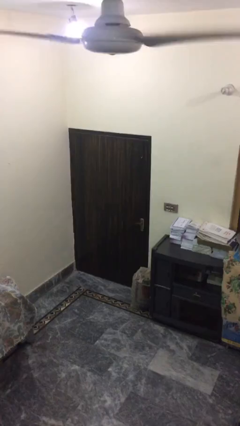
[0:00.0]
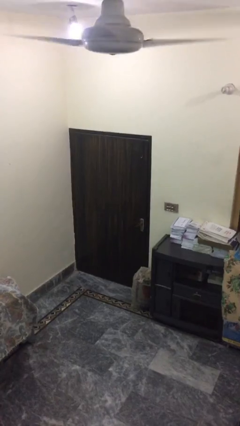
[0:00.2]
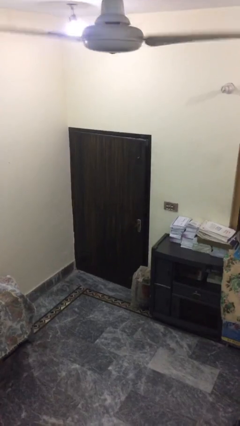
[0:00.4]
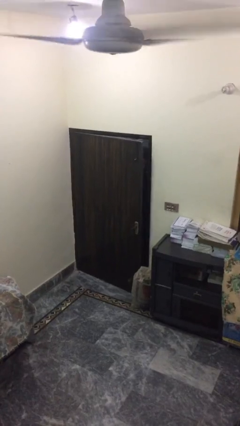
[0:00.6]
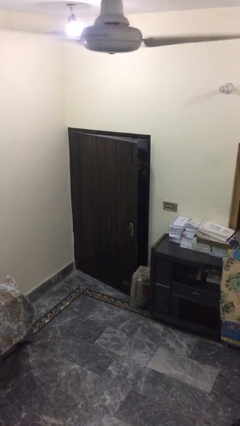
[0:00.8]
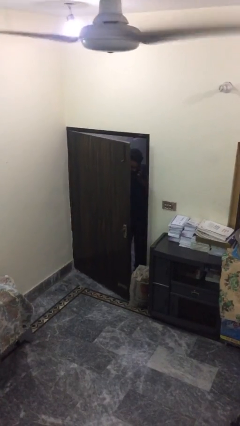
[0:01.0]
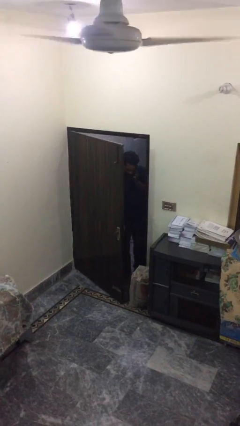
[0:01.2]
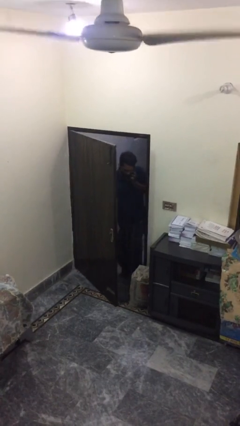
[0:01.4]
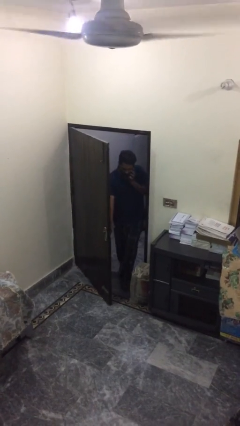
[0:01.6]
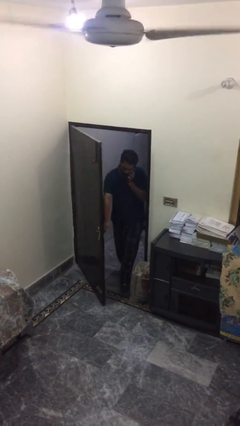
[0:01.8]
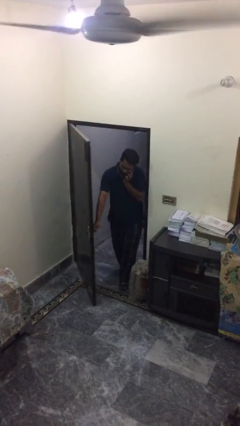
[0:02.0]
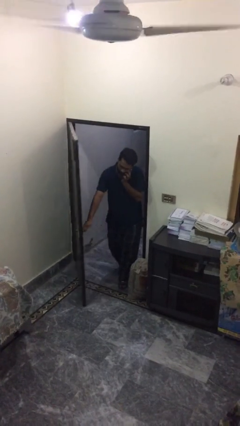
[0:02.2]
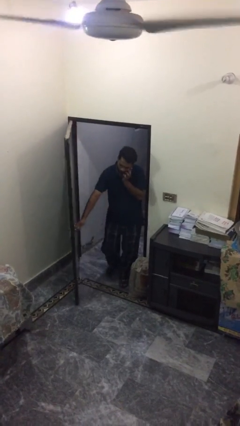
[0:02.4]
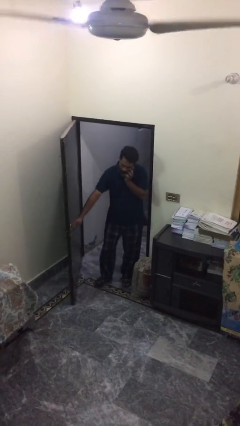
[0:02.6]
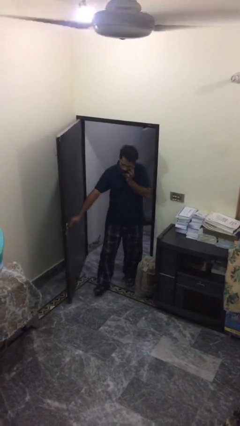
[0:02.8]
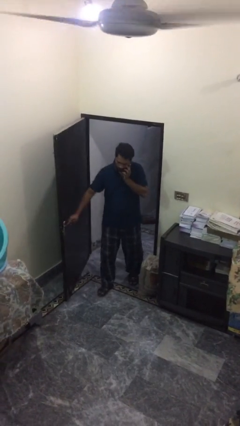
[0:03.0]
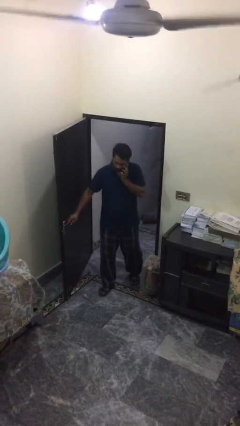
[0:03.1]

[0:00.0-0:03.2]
person opens facility door

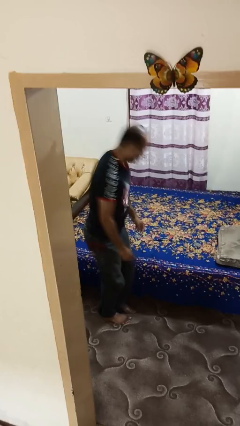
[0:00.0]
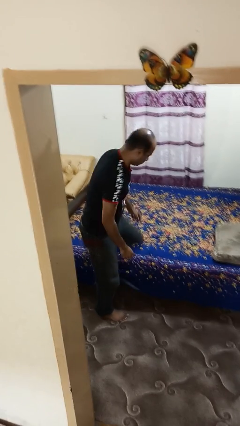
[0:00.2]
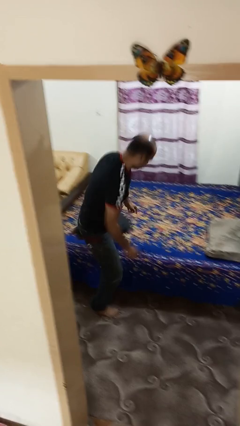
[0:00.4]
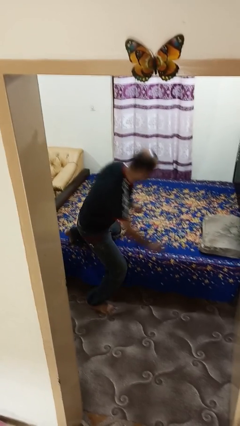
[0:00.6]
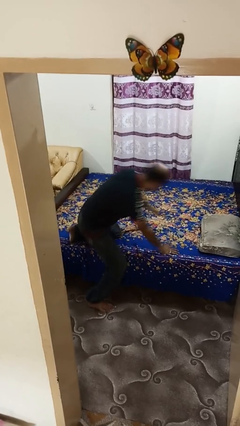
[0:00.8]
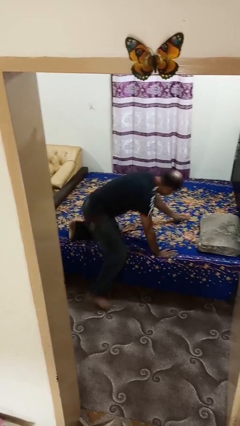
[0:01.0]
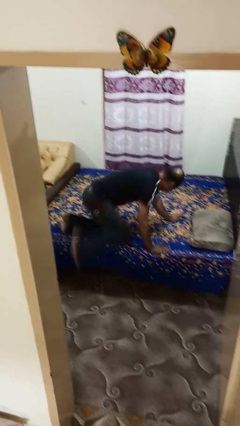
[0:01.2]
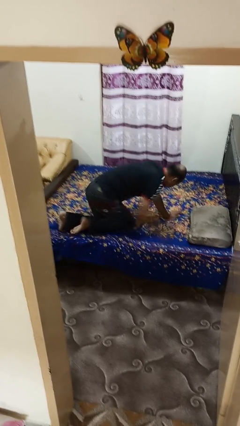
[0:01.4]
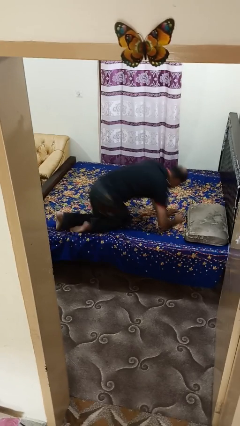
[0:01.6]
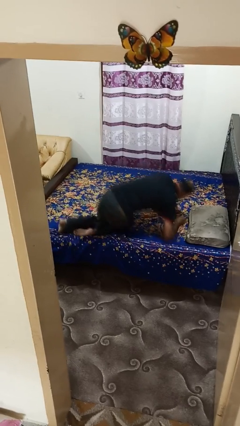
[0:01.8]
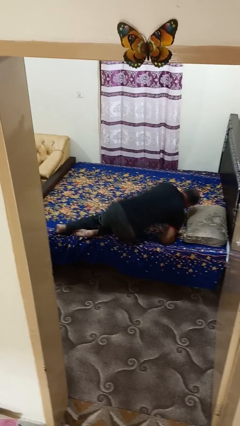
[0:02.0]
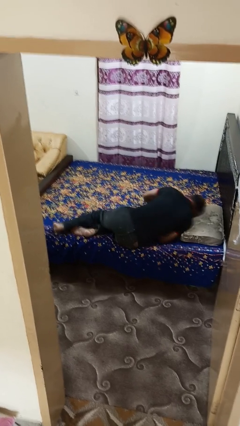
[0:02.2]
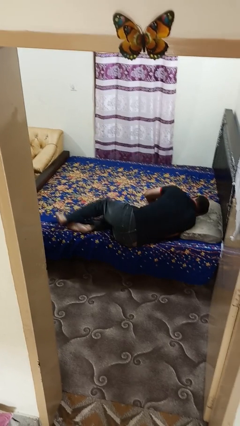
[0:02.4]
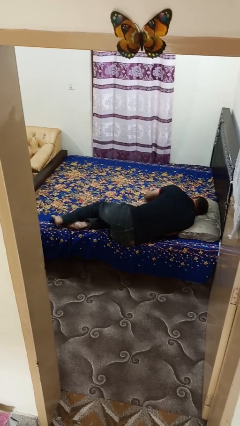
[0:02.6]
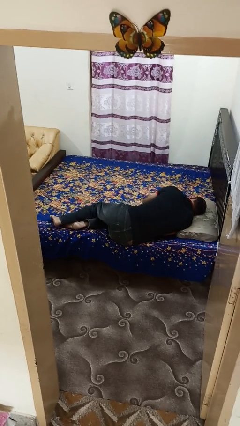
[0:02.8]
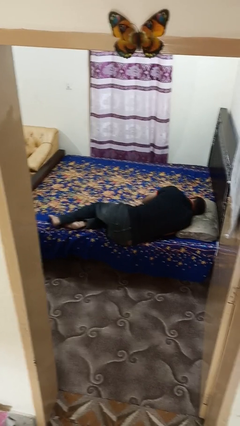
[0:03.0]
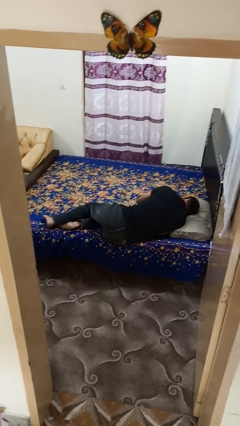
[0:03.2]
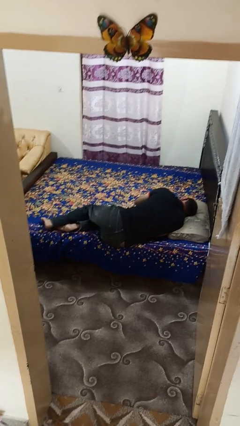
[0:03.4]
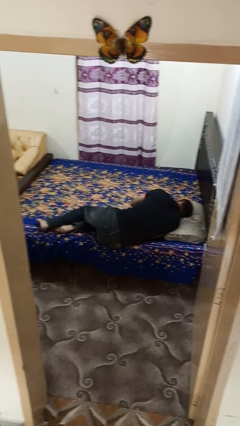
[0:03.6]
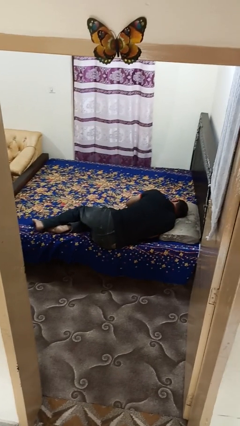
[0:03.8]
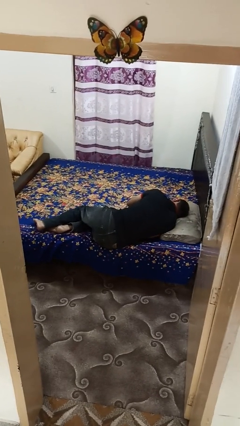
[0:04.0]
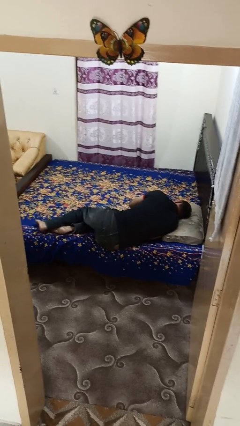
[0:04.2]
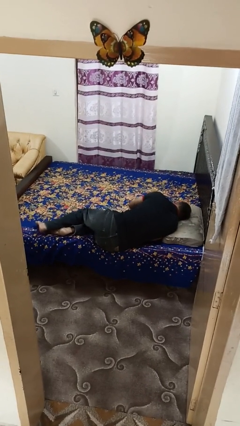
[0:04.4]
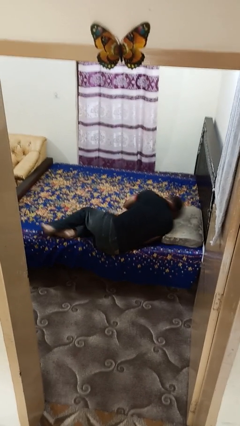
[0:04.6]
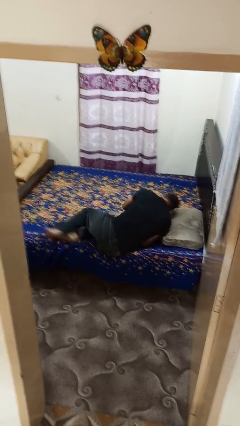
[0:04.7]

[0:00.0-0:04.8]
person lies down on bed

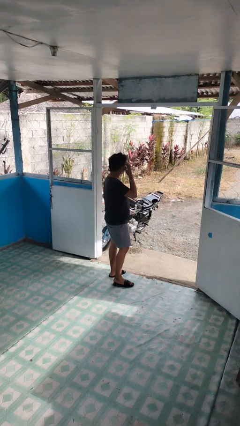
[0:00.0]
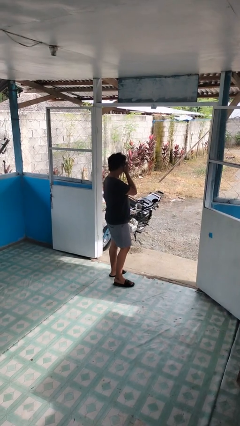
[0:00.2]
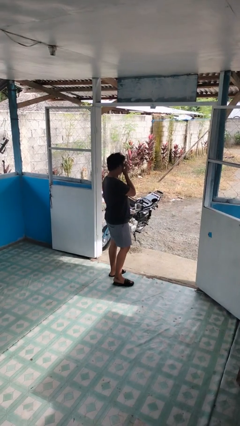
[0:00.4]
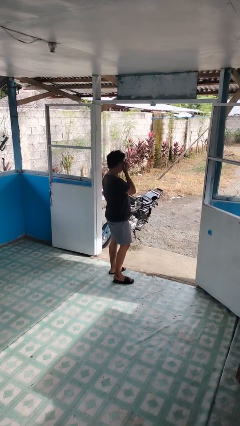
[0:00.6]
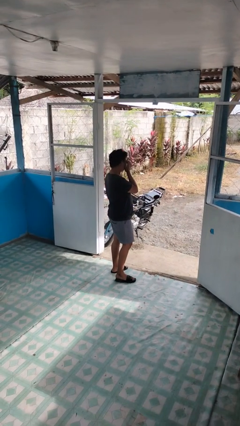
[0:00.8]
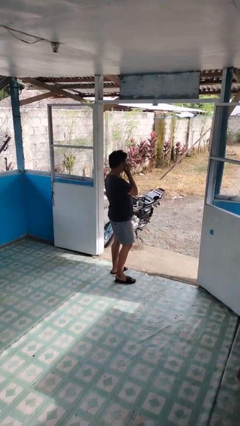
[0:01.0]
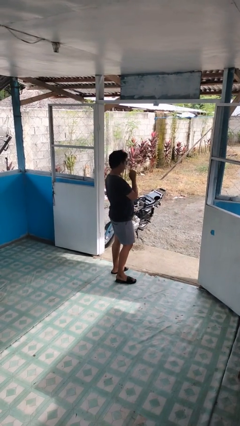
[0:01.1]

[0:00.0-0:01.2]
person scratches face

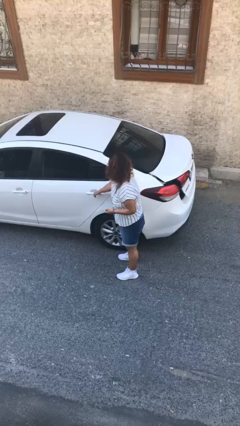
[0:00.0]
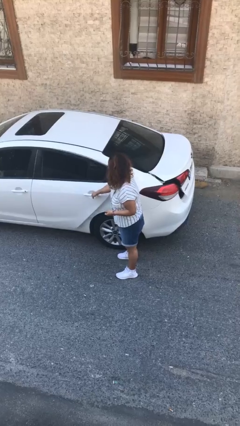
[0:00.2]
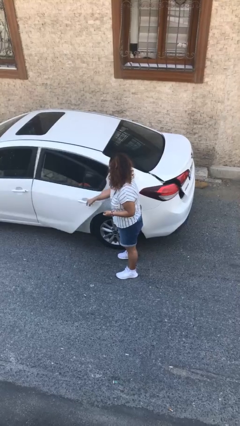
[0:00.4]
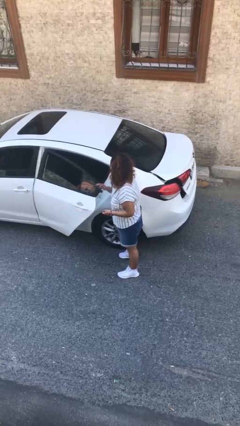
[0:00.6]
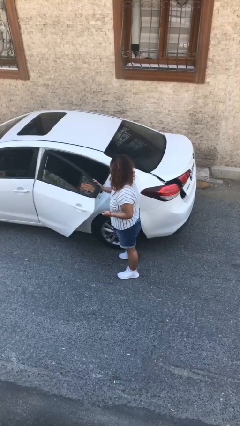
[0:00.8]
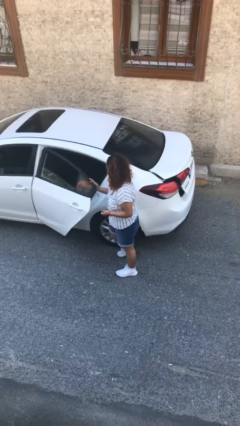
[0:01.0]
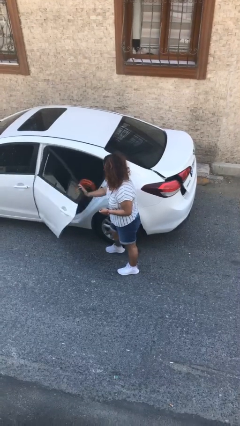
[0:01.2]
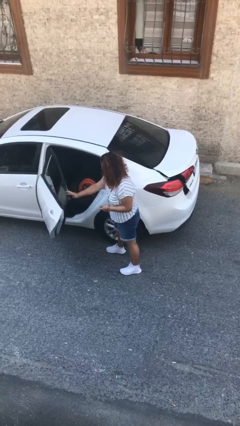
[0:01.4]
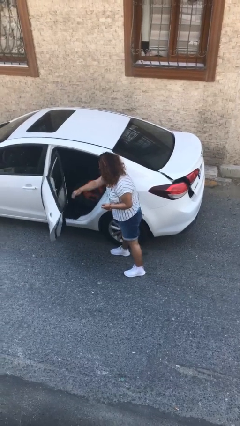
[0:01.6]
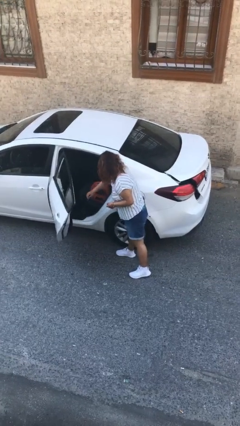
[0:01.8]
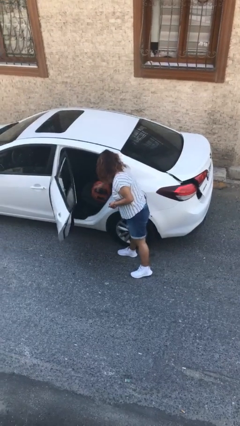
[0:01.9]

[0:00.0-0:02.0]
person opens car door

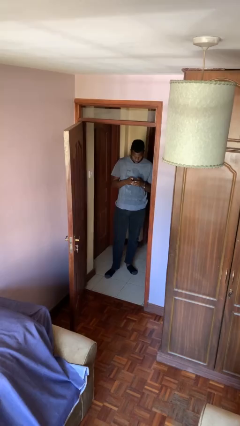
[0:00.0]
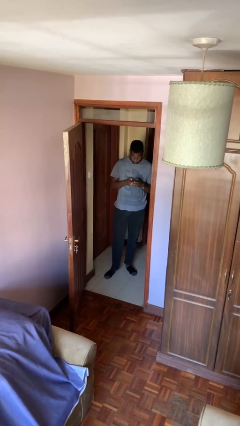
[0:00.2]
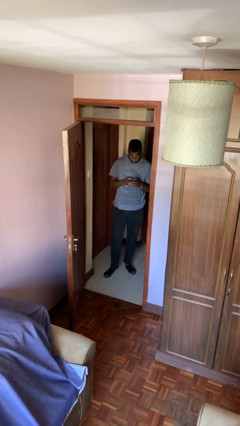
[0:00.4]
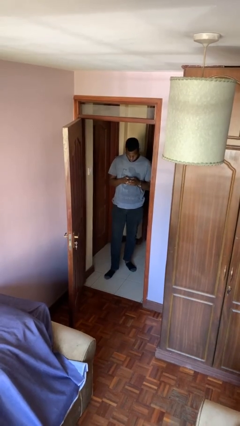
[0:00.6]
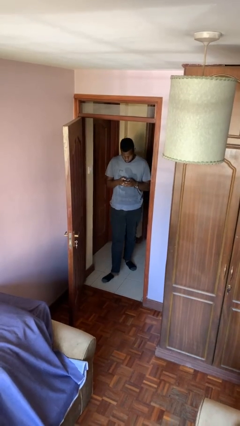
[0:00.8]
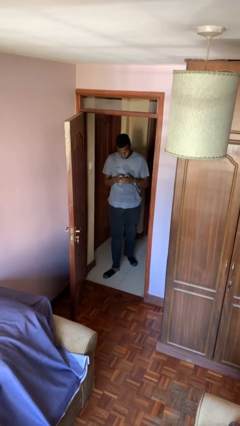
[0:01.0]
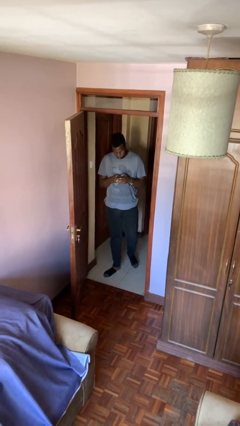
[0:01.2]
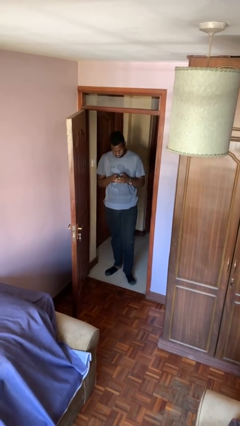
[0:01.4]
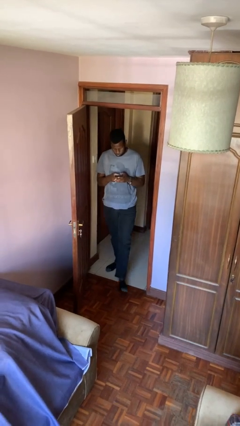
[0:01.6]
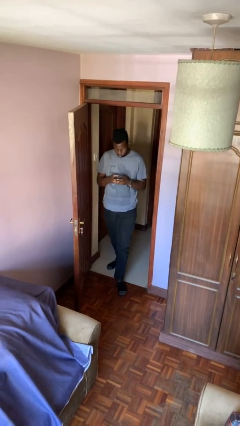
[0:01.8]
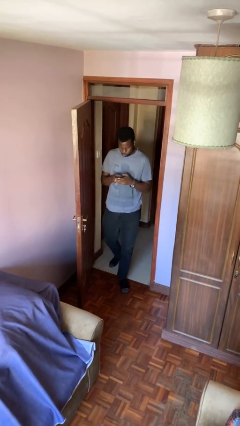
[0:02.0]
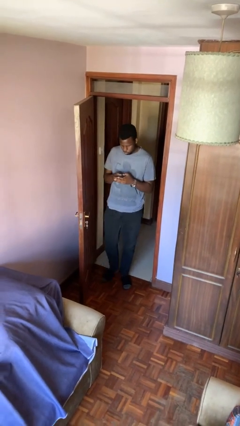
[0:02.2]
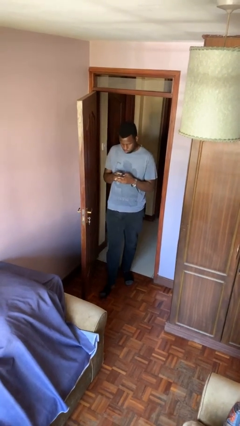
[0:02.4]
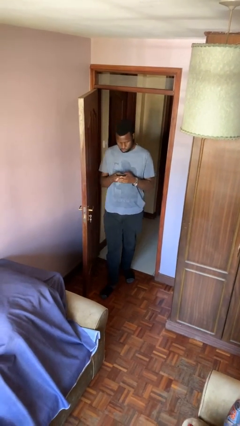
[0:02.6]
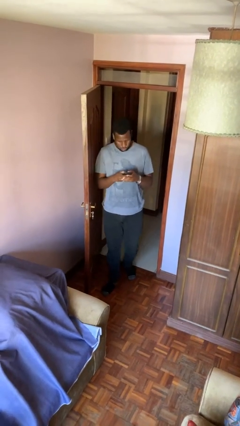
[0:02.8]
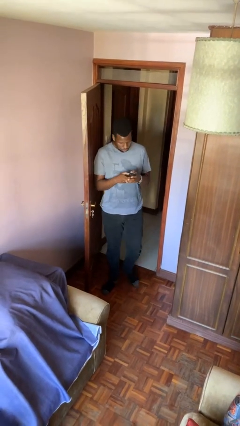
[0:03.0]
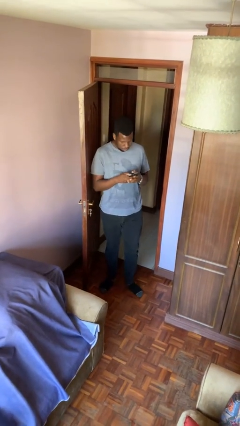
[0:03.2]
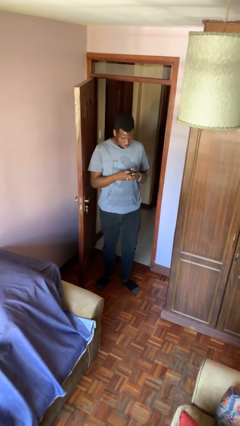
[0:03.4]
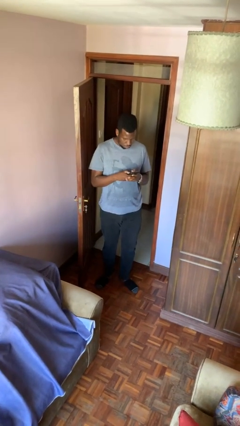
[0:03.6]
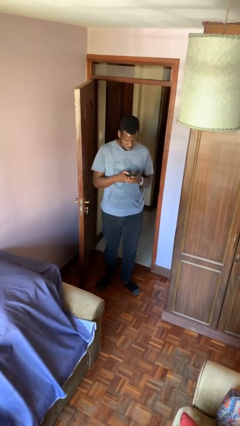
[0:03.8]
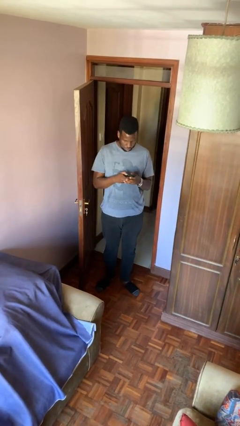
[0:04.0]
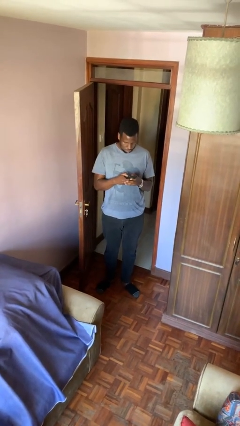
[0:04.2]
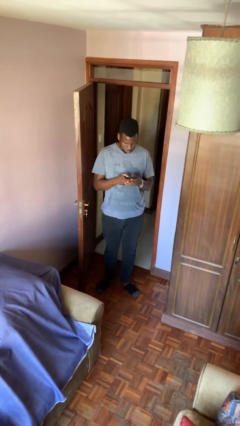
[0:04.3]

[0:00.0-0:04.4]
person enters scene through structure

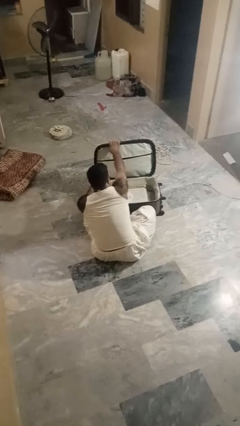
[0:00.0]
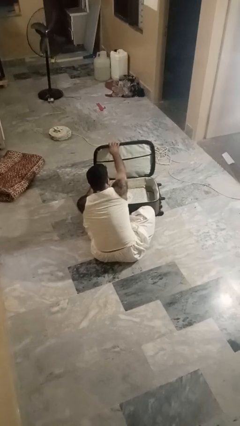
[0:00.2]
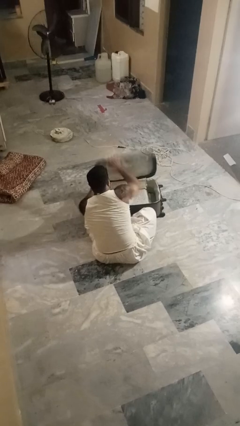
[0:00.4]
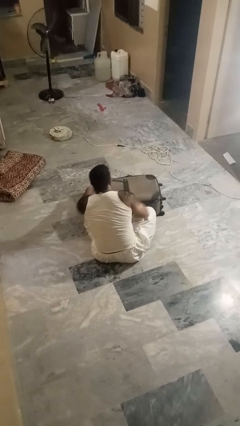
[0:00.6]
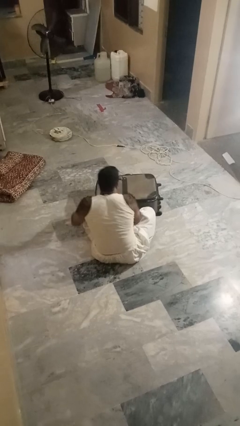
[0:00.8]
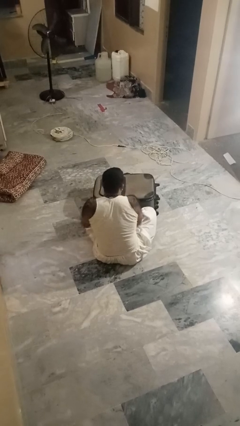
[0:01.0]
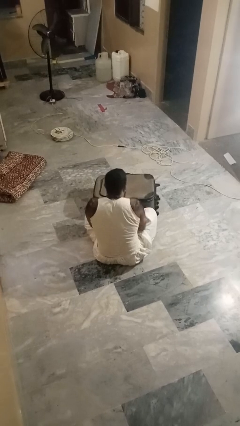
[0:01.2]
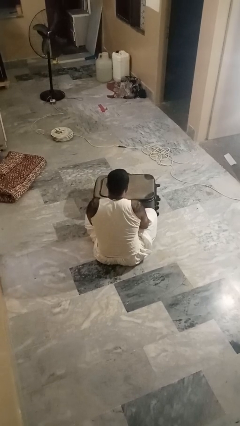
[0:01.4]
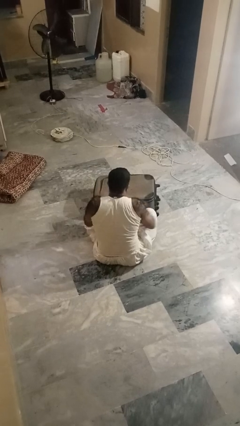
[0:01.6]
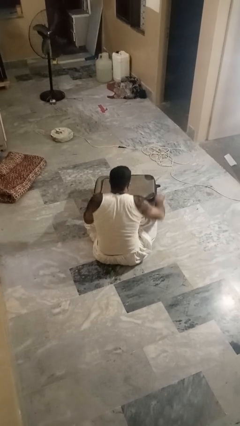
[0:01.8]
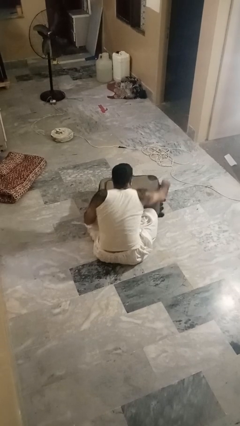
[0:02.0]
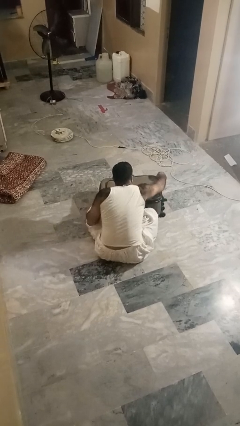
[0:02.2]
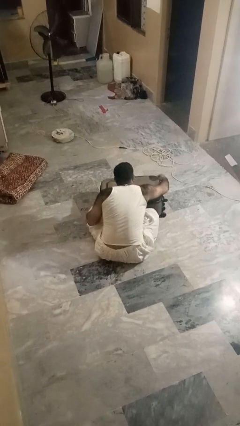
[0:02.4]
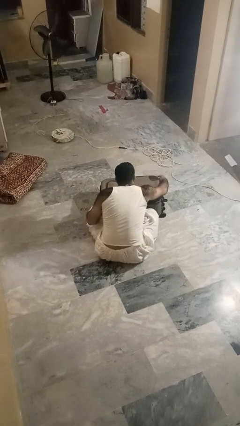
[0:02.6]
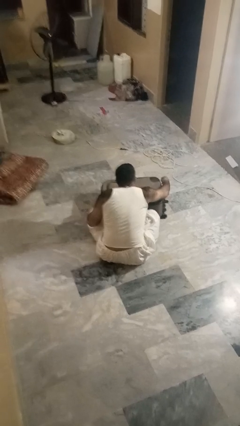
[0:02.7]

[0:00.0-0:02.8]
person closes suitcase
